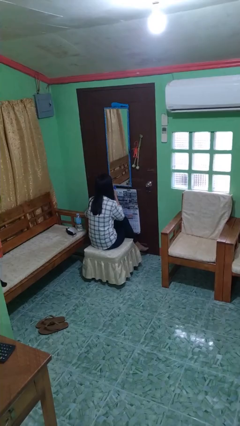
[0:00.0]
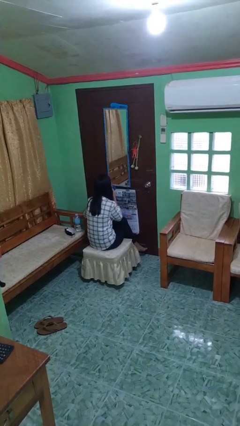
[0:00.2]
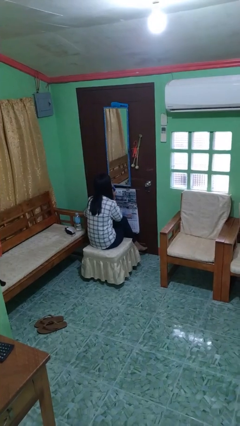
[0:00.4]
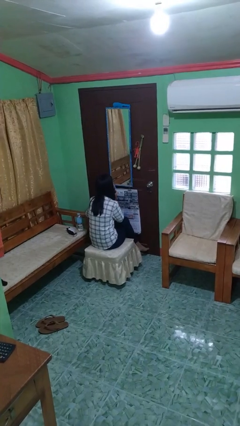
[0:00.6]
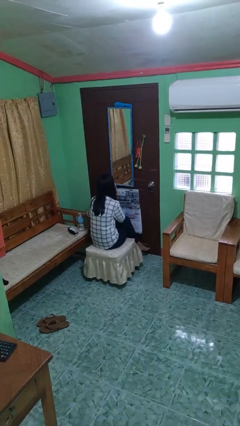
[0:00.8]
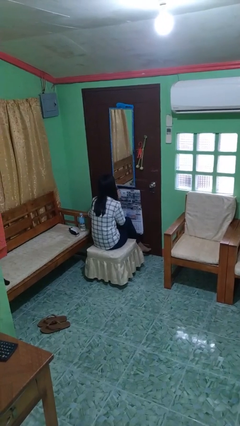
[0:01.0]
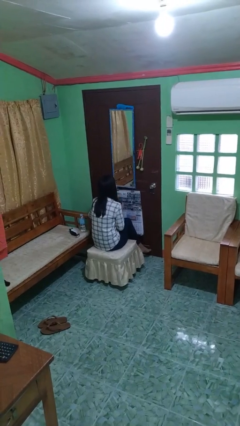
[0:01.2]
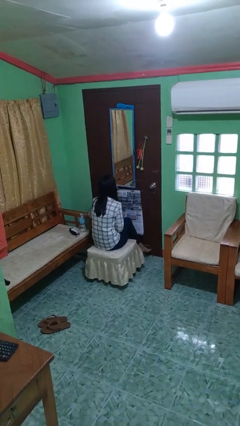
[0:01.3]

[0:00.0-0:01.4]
person wipes mouth with napkin

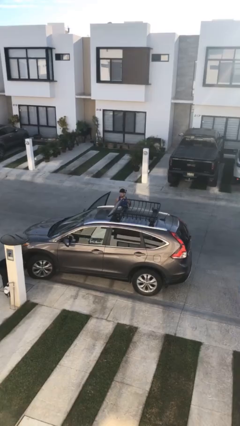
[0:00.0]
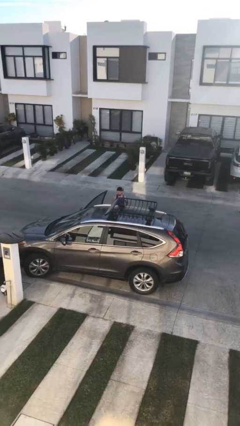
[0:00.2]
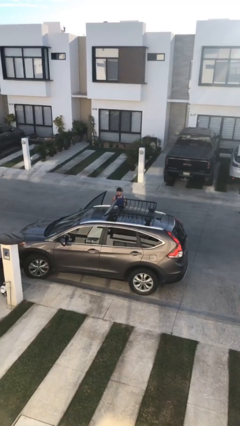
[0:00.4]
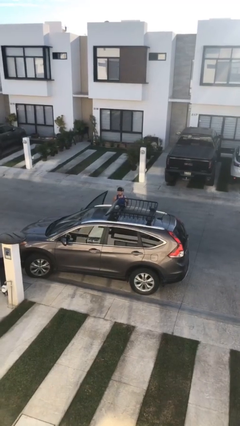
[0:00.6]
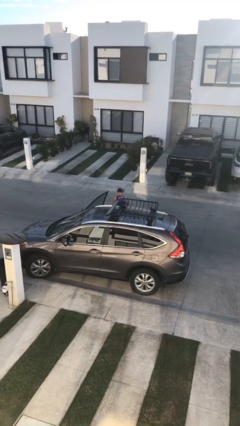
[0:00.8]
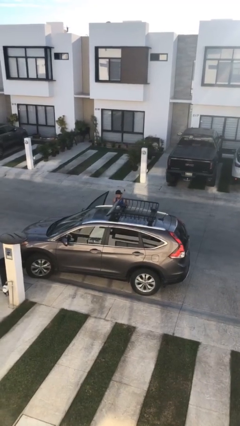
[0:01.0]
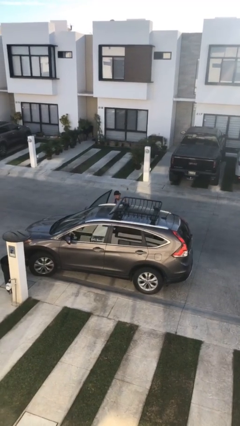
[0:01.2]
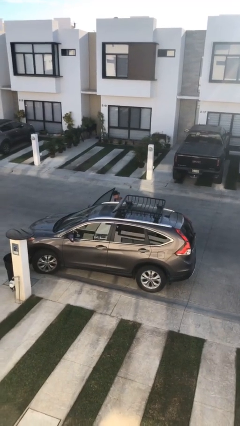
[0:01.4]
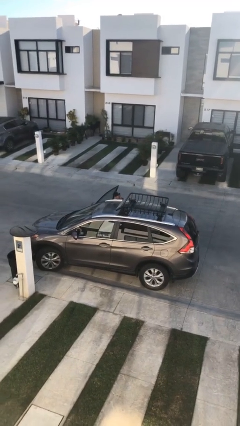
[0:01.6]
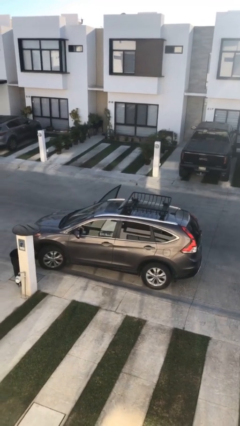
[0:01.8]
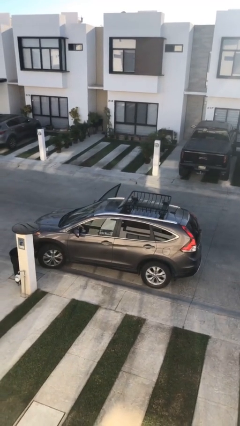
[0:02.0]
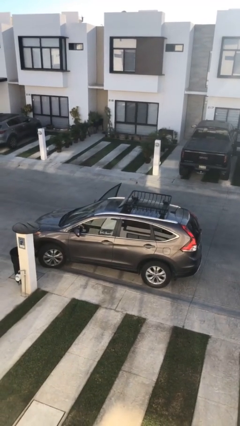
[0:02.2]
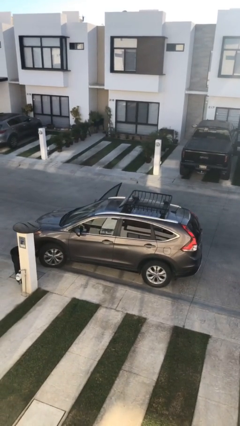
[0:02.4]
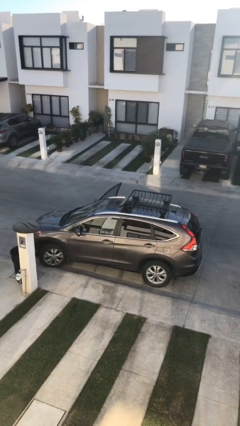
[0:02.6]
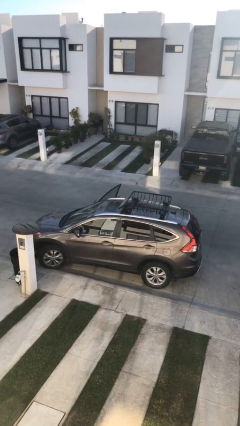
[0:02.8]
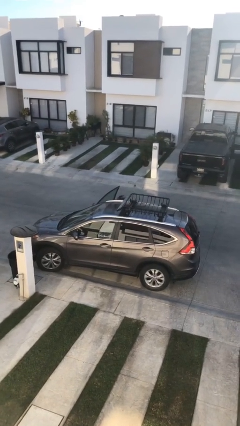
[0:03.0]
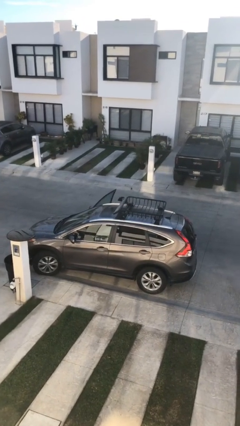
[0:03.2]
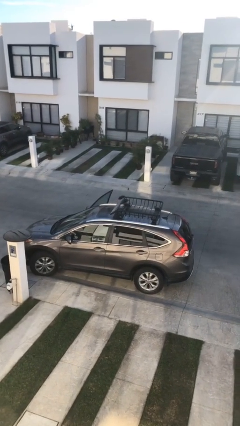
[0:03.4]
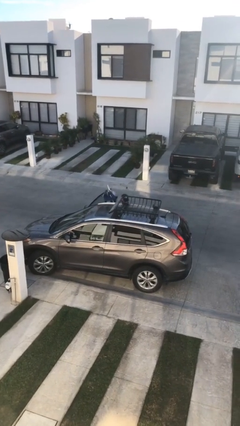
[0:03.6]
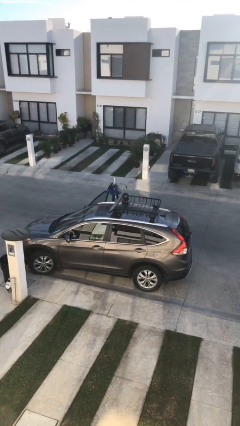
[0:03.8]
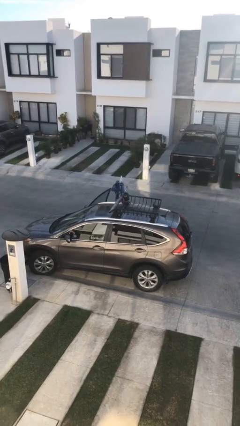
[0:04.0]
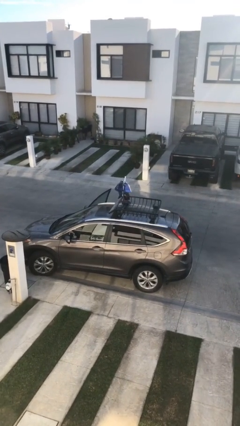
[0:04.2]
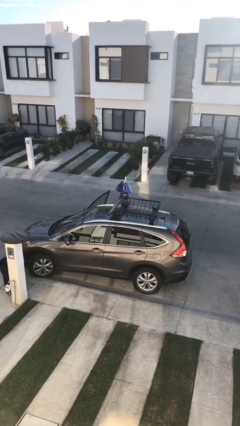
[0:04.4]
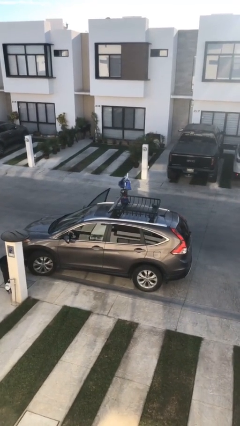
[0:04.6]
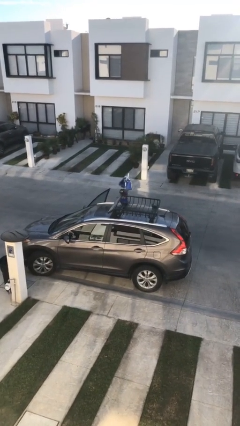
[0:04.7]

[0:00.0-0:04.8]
person unloads car

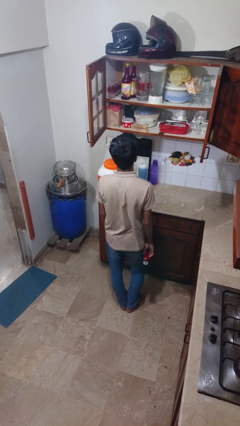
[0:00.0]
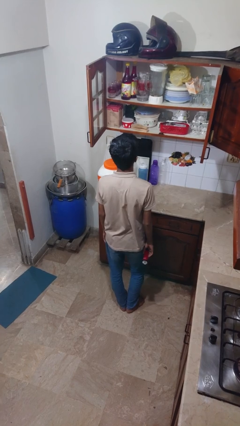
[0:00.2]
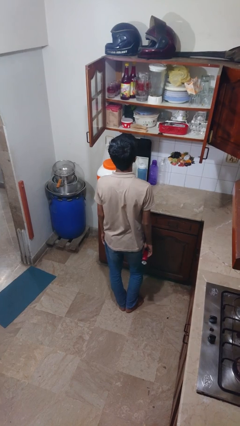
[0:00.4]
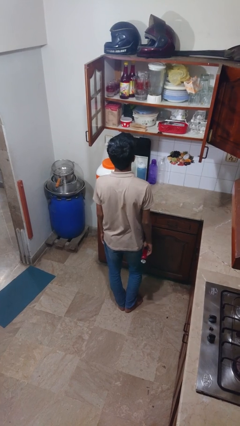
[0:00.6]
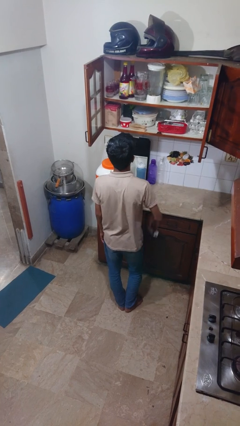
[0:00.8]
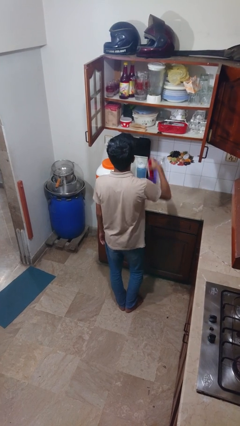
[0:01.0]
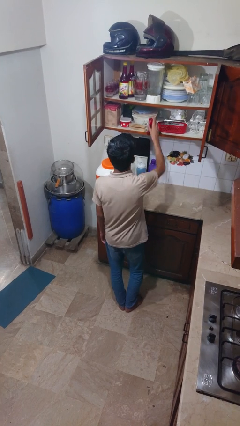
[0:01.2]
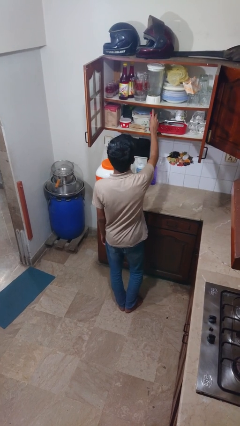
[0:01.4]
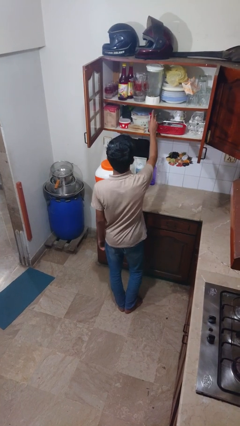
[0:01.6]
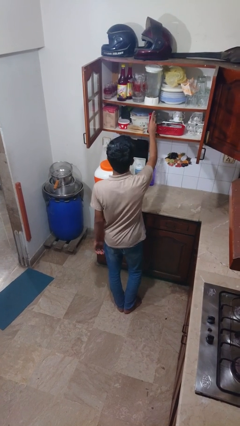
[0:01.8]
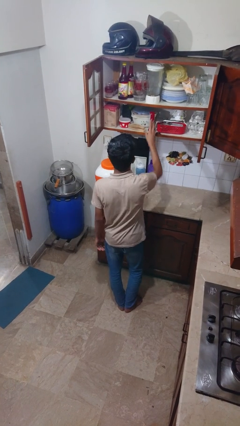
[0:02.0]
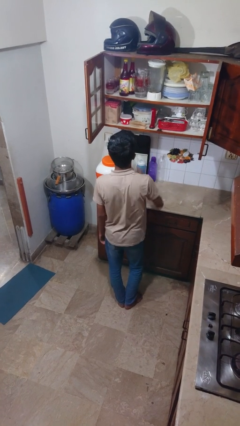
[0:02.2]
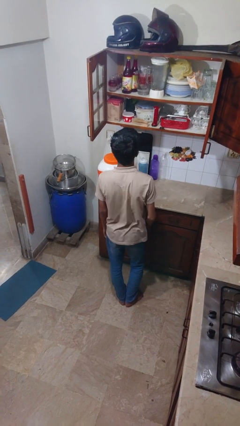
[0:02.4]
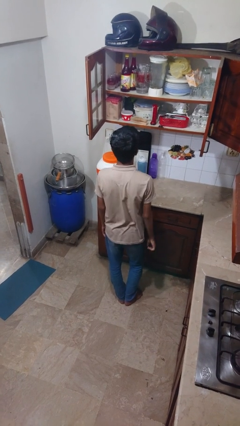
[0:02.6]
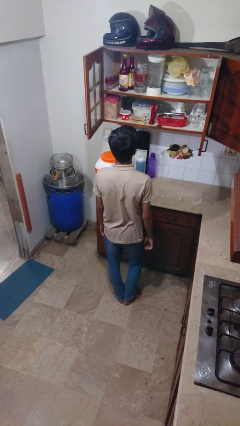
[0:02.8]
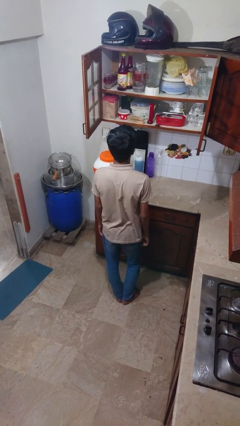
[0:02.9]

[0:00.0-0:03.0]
person puts down object into cabinet

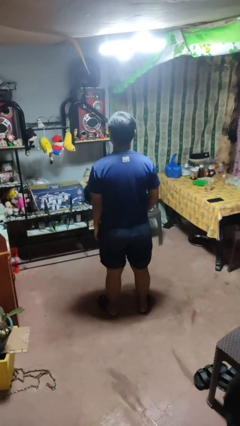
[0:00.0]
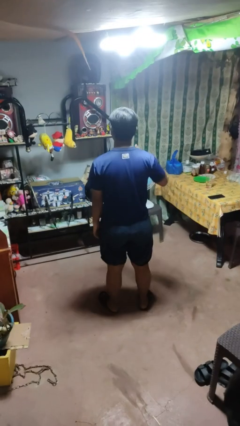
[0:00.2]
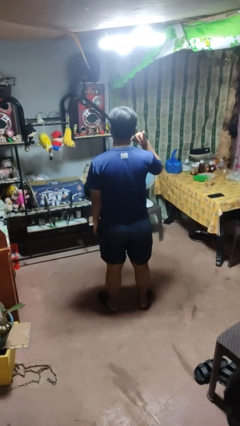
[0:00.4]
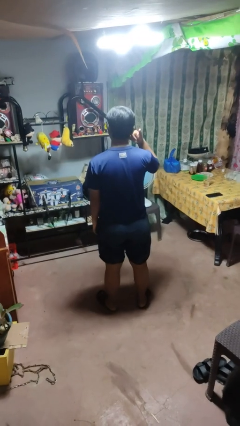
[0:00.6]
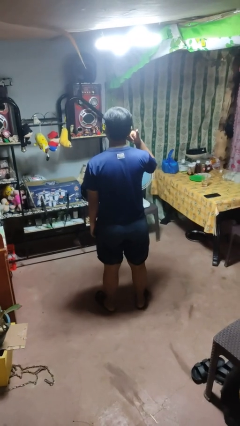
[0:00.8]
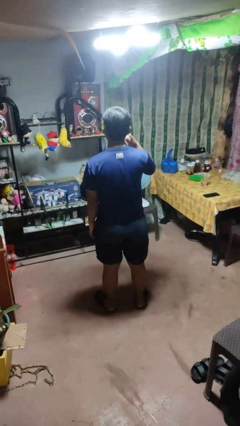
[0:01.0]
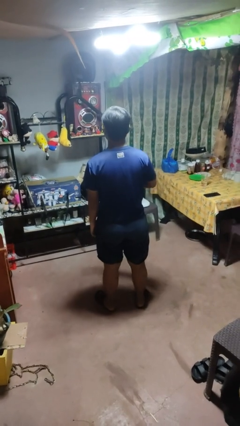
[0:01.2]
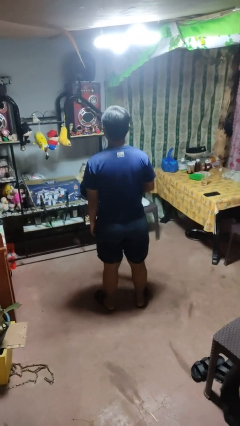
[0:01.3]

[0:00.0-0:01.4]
person gestures call me

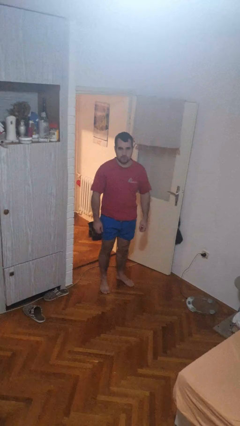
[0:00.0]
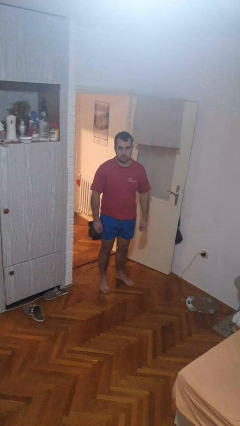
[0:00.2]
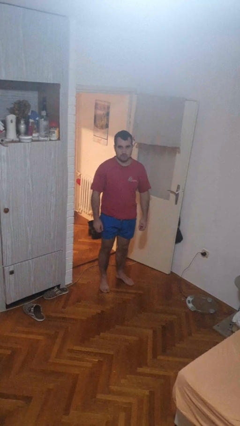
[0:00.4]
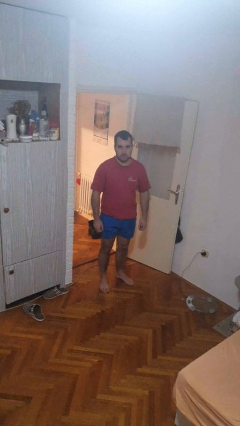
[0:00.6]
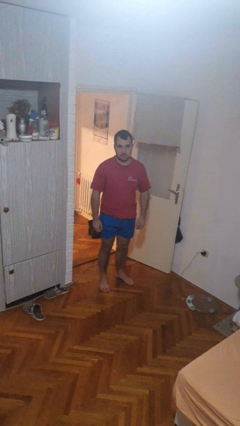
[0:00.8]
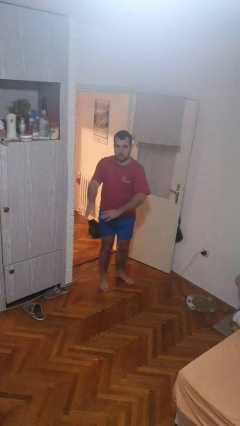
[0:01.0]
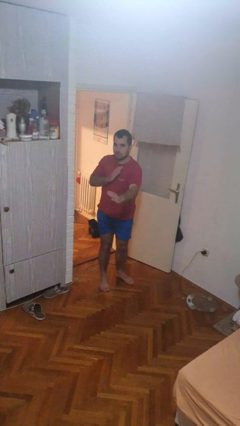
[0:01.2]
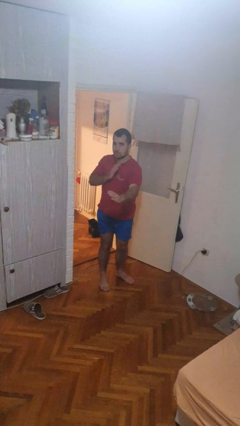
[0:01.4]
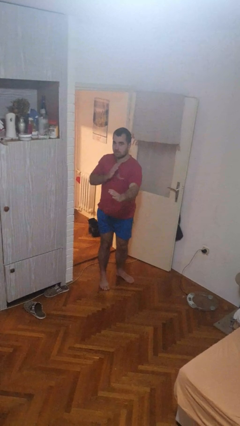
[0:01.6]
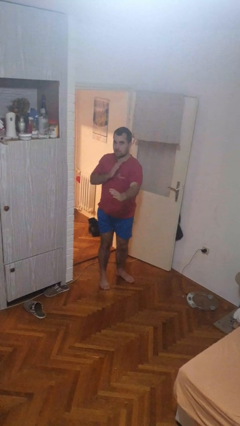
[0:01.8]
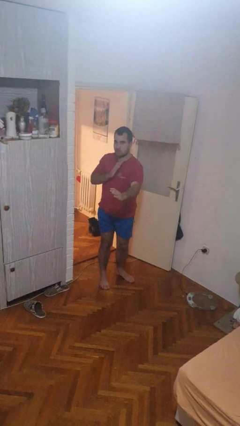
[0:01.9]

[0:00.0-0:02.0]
person karate chop

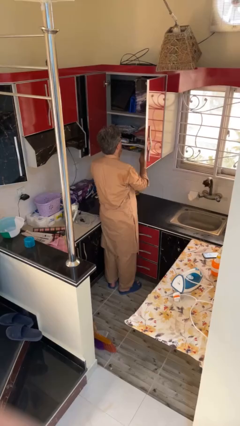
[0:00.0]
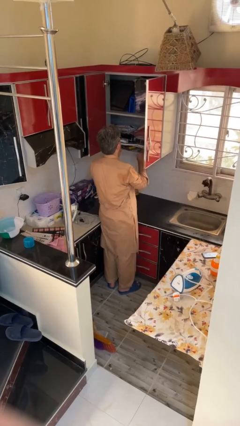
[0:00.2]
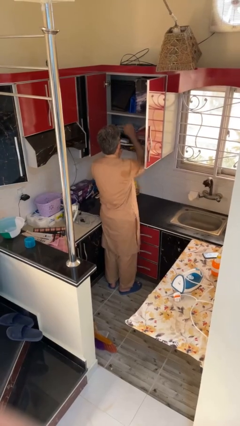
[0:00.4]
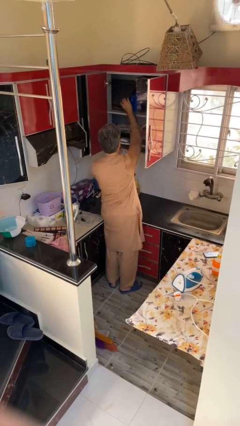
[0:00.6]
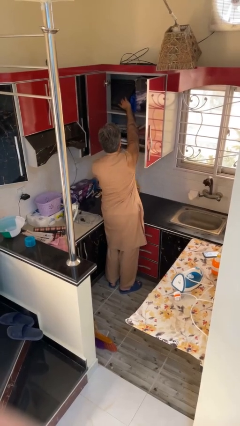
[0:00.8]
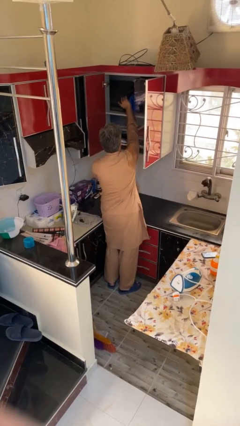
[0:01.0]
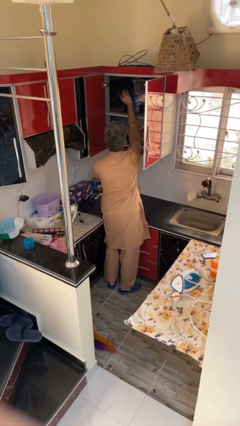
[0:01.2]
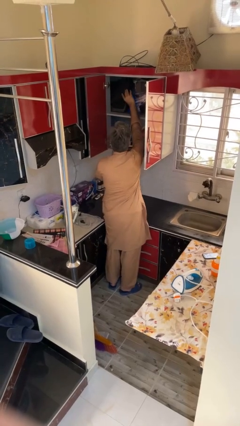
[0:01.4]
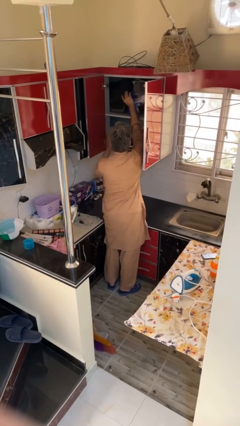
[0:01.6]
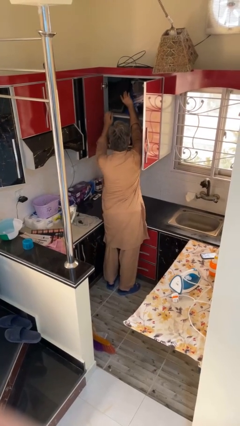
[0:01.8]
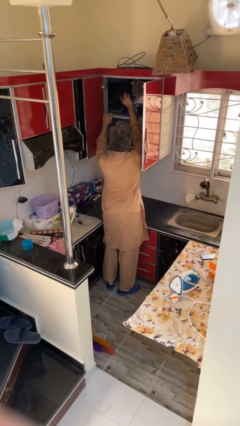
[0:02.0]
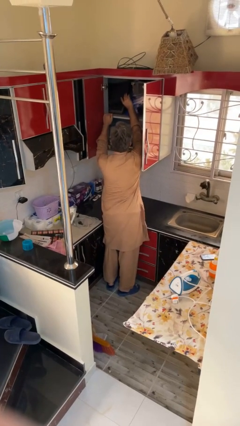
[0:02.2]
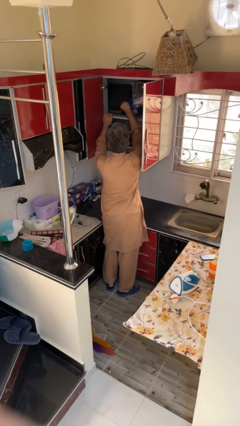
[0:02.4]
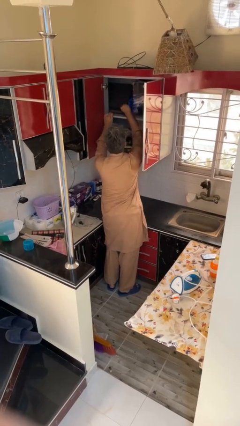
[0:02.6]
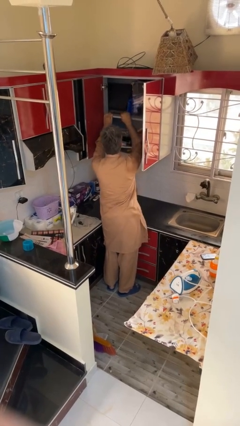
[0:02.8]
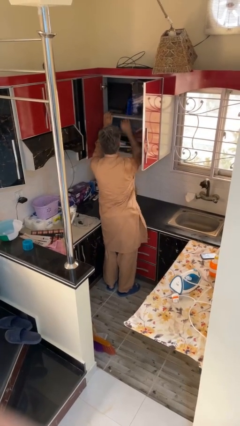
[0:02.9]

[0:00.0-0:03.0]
person searches in cabinet

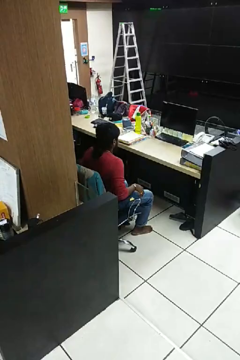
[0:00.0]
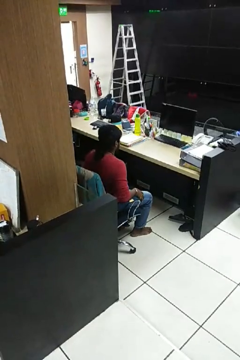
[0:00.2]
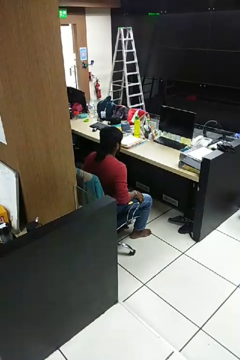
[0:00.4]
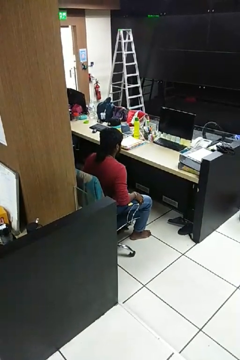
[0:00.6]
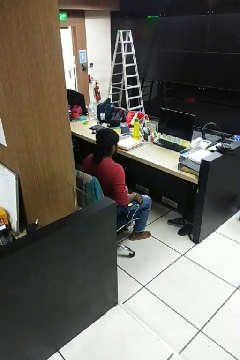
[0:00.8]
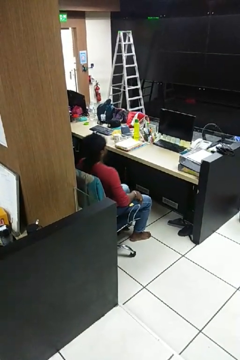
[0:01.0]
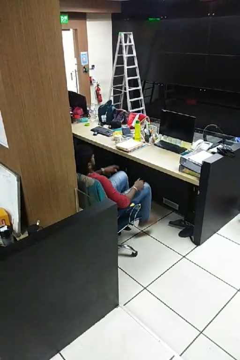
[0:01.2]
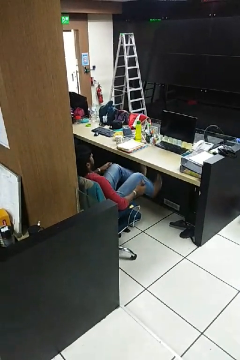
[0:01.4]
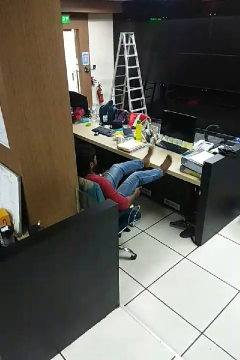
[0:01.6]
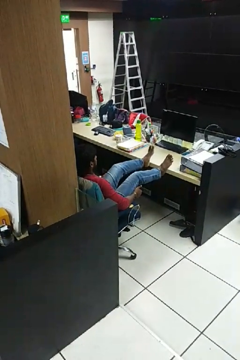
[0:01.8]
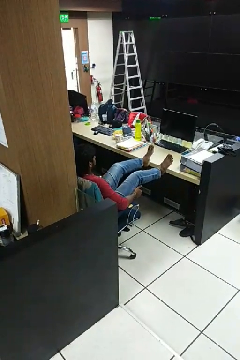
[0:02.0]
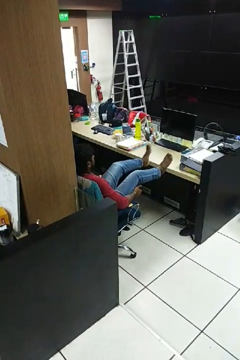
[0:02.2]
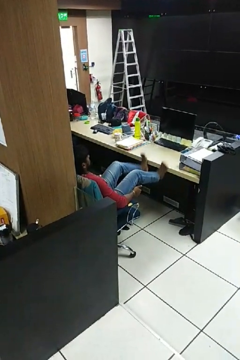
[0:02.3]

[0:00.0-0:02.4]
person puts feet up
